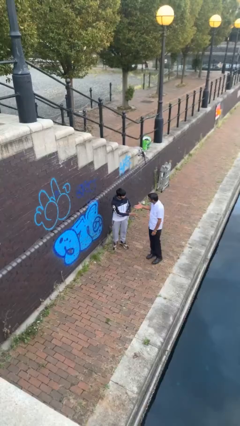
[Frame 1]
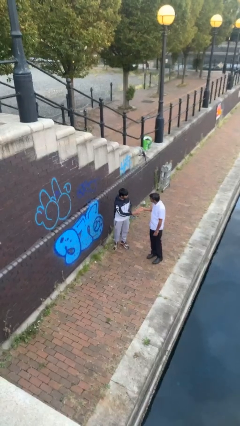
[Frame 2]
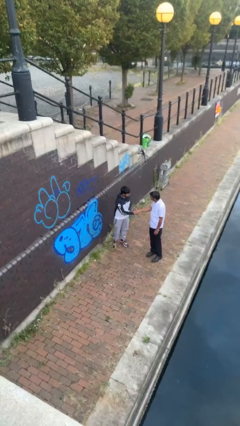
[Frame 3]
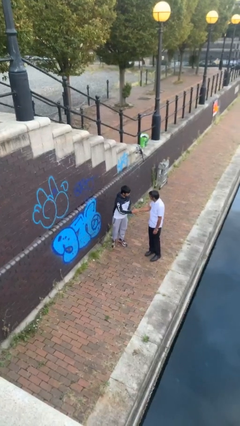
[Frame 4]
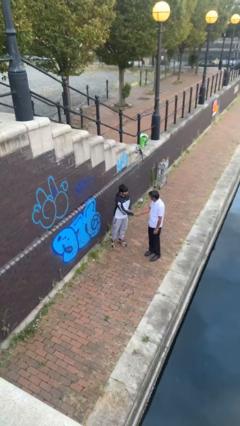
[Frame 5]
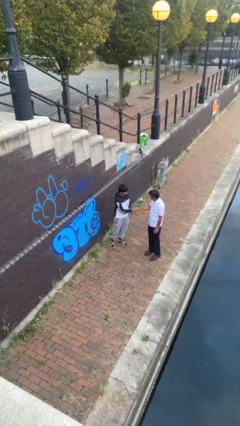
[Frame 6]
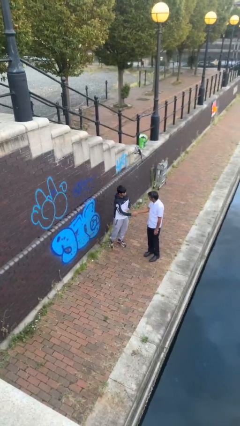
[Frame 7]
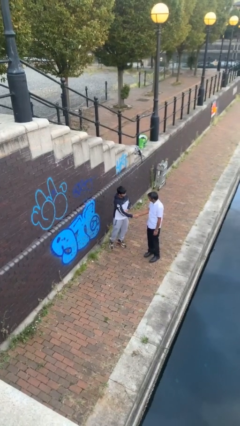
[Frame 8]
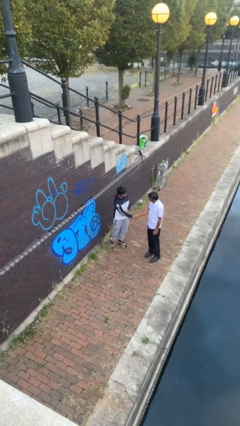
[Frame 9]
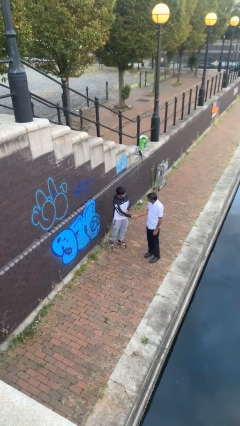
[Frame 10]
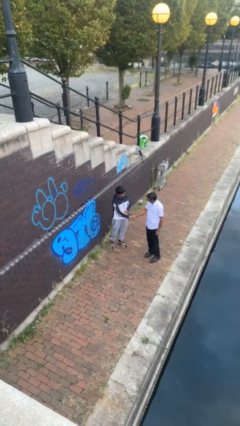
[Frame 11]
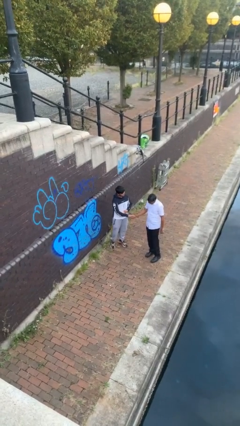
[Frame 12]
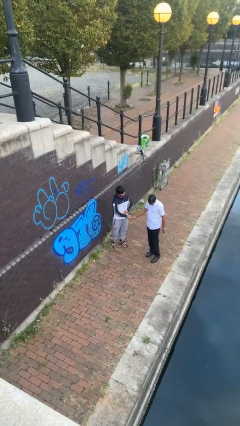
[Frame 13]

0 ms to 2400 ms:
person shakes hand

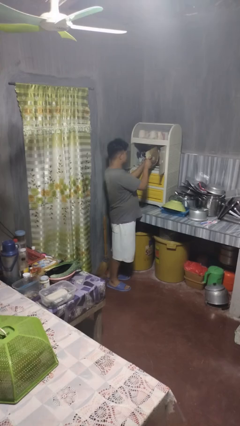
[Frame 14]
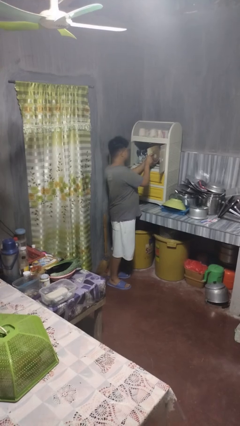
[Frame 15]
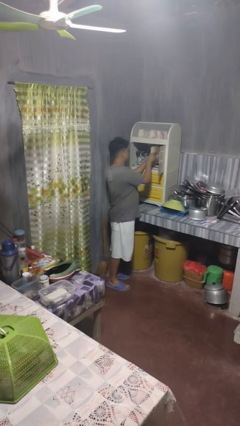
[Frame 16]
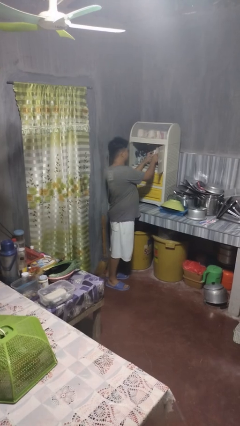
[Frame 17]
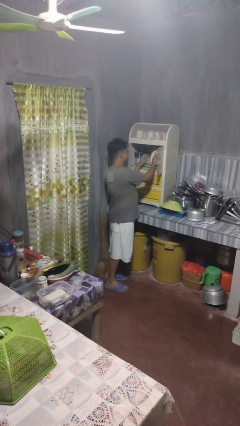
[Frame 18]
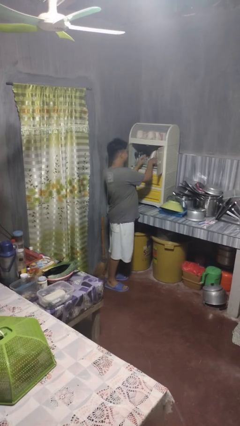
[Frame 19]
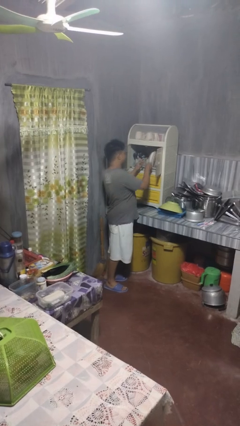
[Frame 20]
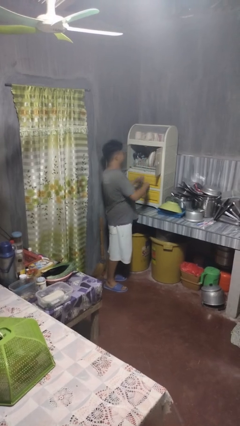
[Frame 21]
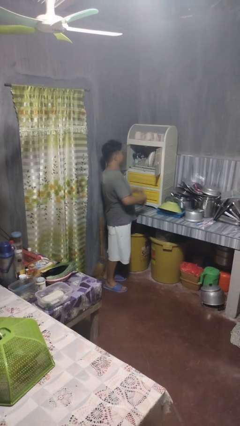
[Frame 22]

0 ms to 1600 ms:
person puts object in cabinet

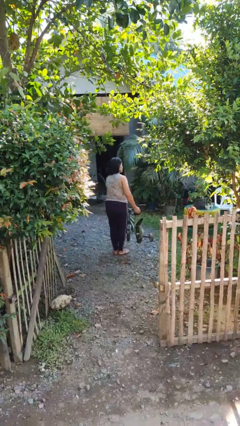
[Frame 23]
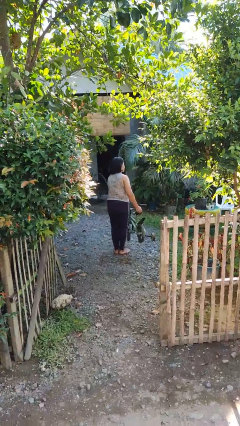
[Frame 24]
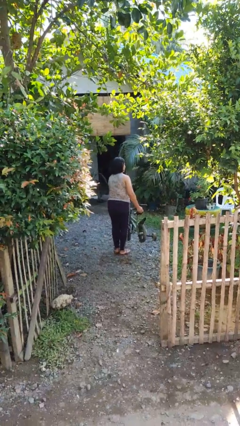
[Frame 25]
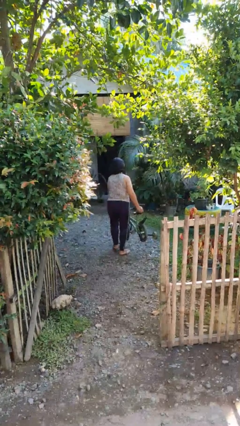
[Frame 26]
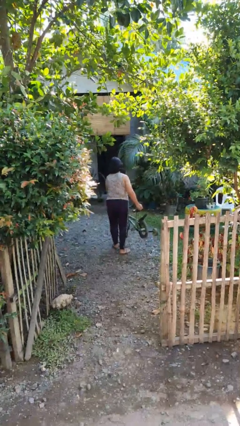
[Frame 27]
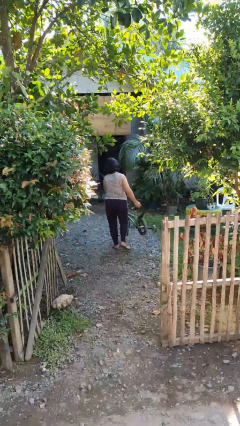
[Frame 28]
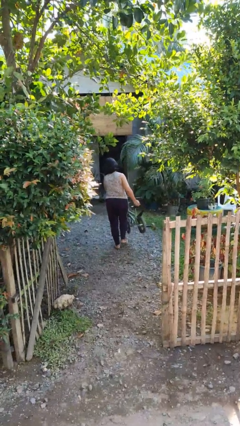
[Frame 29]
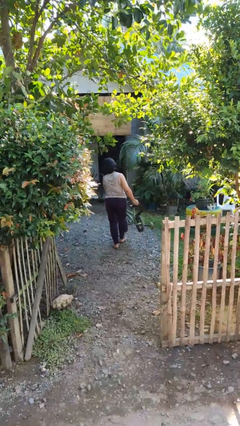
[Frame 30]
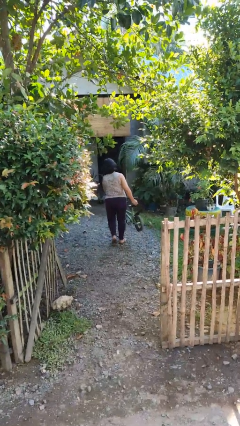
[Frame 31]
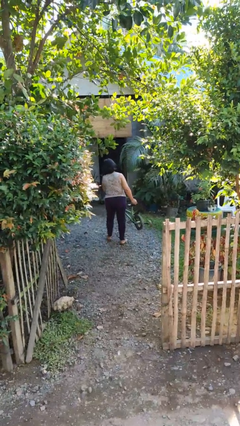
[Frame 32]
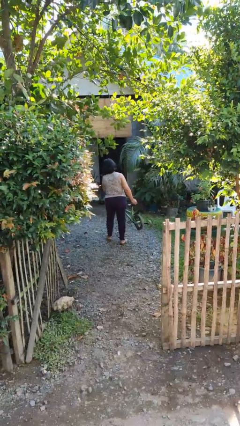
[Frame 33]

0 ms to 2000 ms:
person carries bicycle

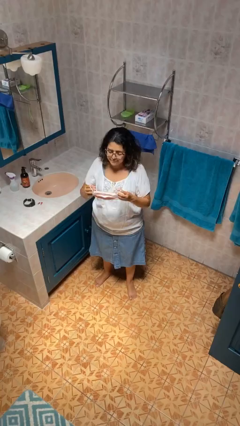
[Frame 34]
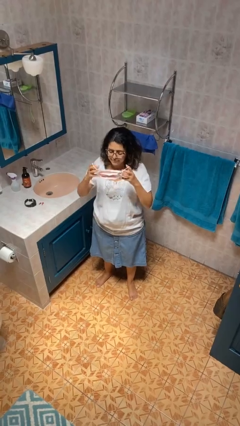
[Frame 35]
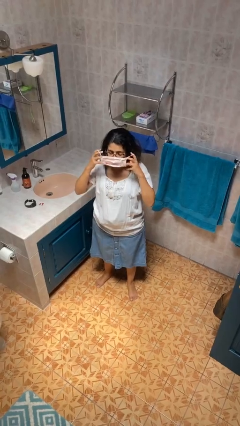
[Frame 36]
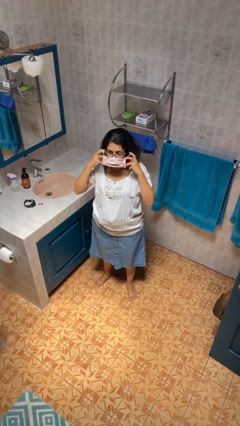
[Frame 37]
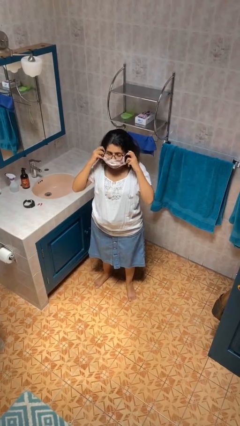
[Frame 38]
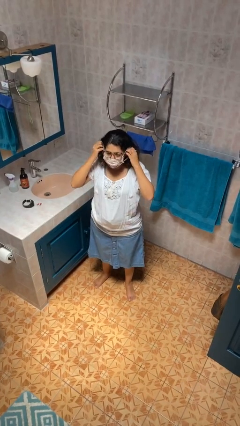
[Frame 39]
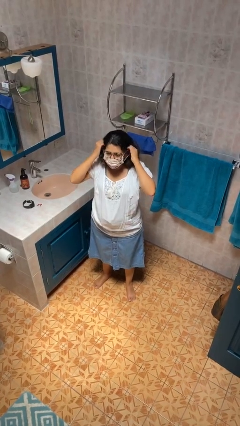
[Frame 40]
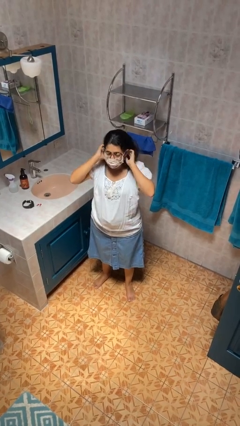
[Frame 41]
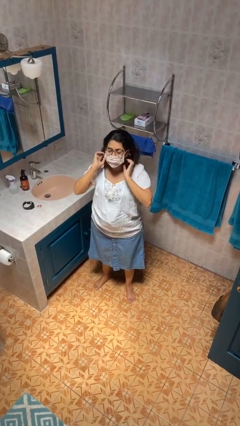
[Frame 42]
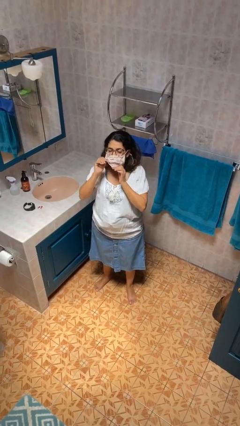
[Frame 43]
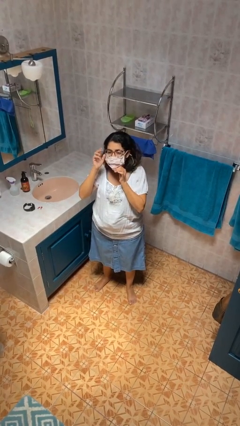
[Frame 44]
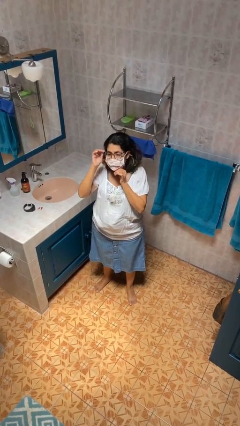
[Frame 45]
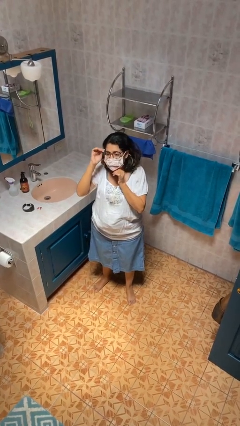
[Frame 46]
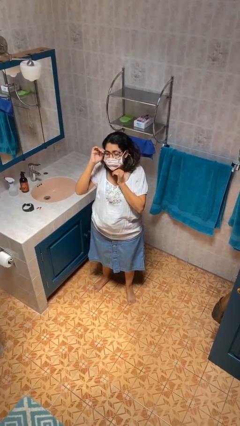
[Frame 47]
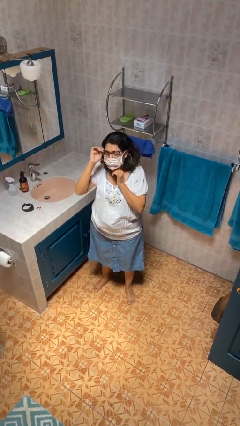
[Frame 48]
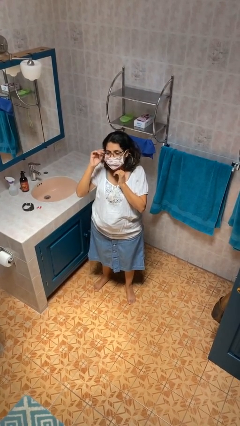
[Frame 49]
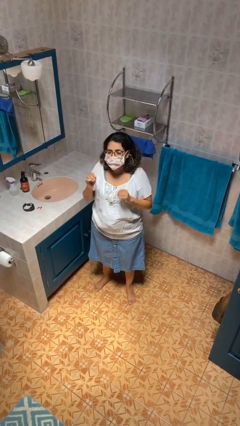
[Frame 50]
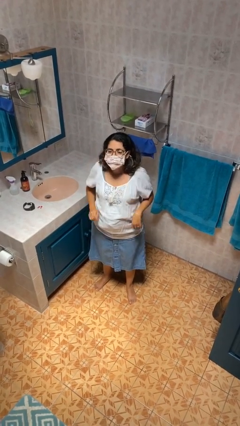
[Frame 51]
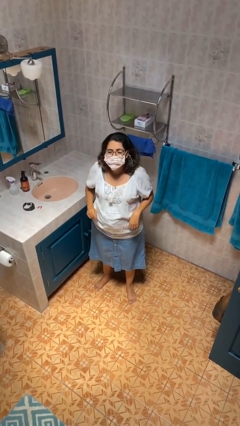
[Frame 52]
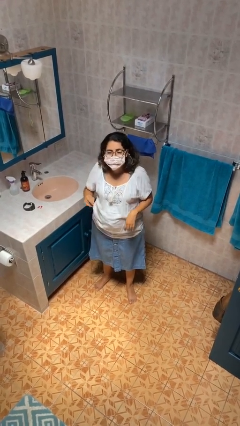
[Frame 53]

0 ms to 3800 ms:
person puts on facemask

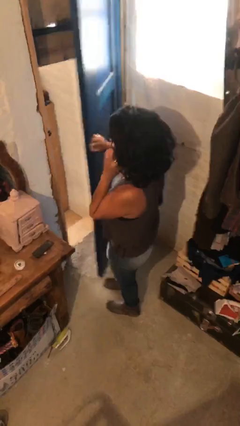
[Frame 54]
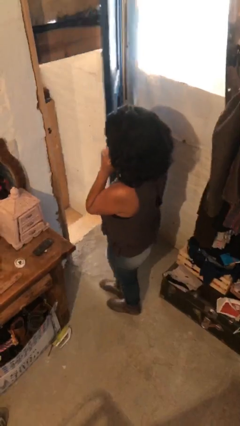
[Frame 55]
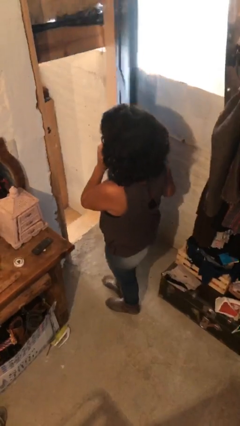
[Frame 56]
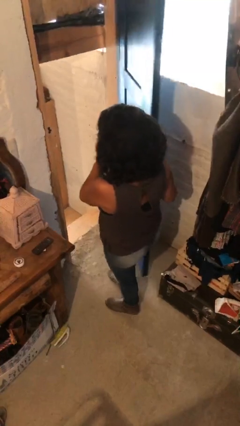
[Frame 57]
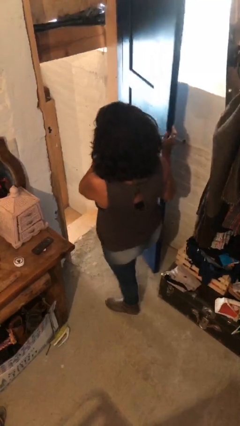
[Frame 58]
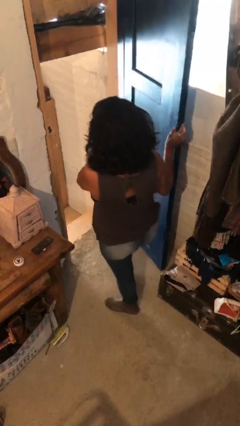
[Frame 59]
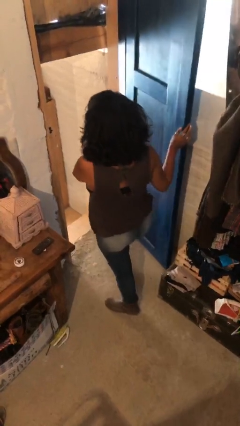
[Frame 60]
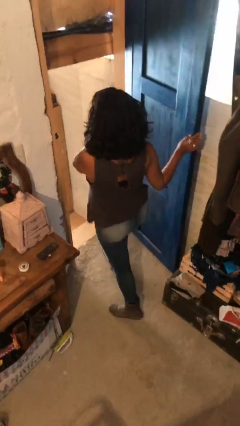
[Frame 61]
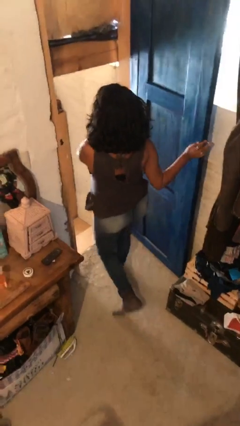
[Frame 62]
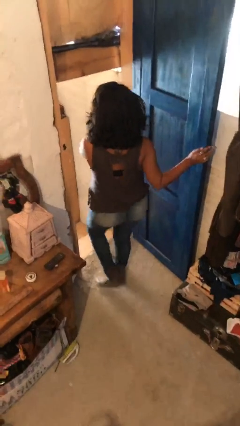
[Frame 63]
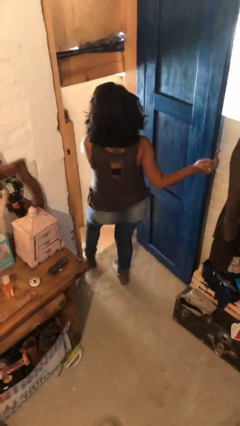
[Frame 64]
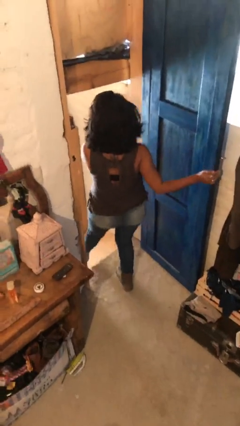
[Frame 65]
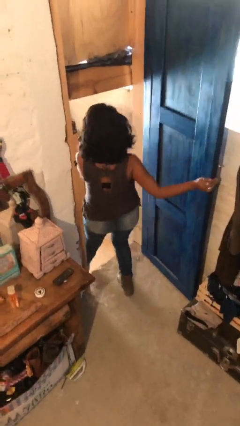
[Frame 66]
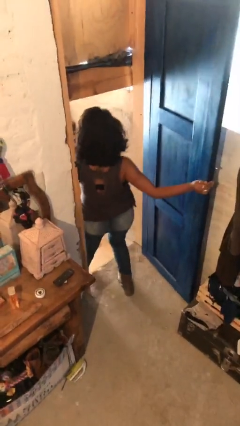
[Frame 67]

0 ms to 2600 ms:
person exits scene through structure

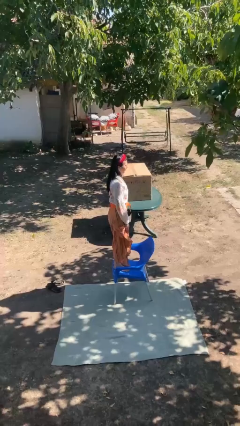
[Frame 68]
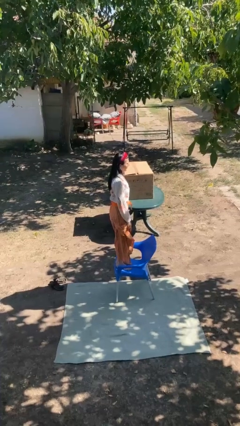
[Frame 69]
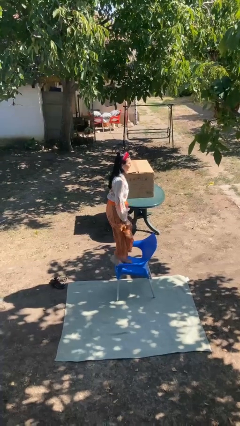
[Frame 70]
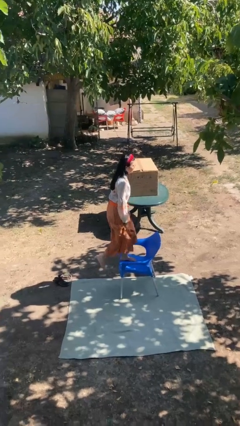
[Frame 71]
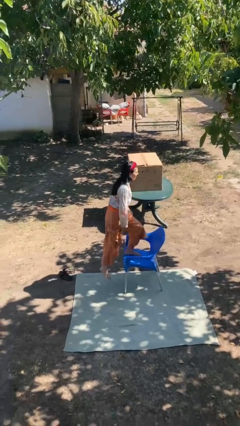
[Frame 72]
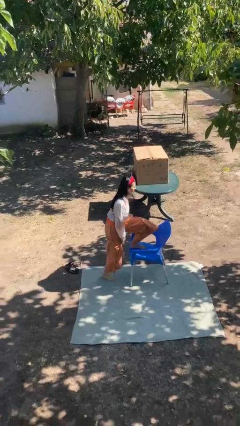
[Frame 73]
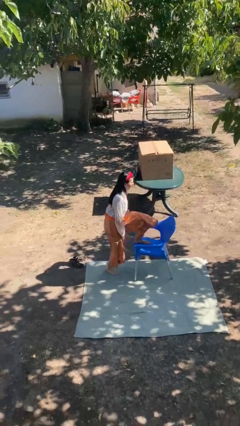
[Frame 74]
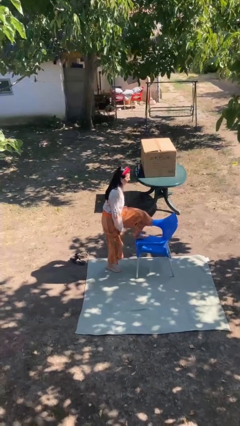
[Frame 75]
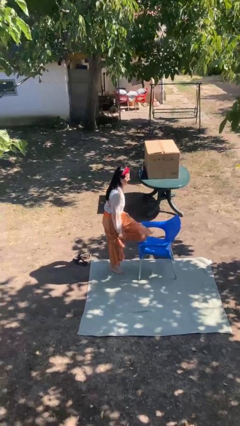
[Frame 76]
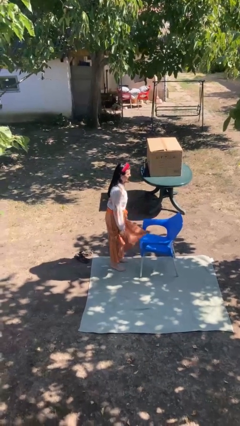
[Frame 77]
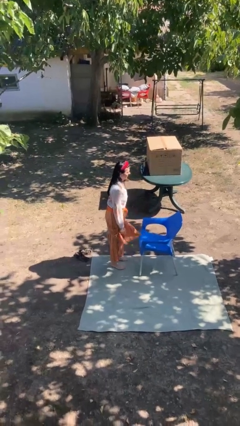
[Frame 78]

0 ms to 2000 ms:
person climbs off chair

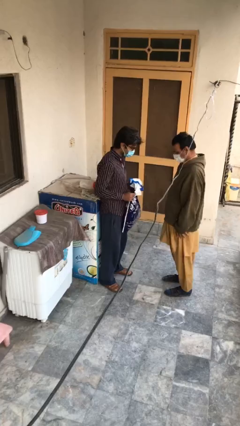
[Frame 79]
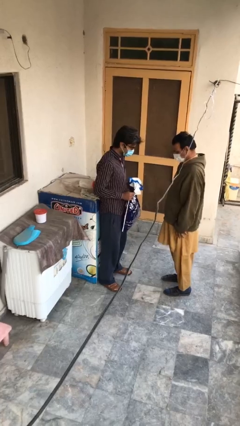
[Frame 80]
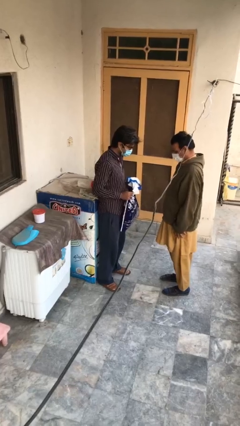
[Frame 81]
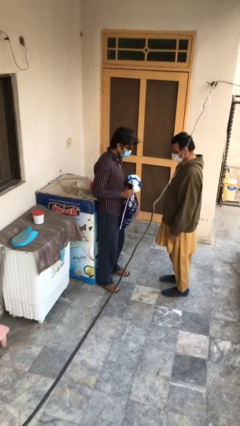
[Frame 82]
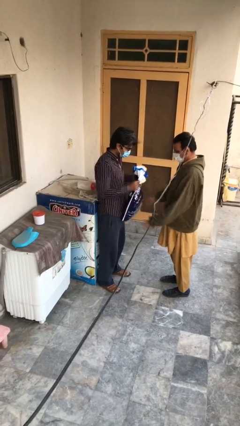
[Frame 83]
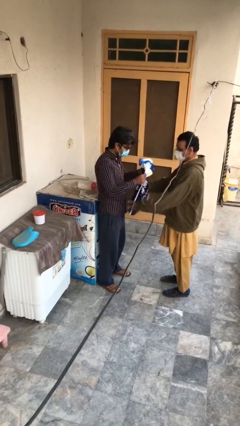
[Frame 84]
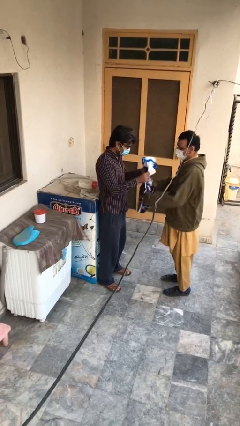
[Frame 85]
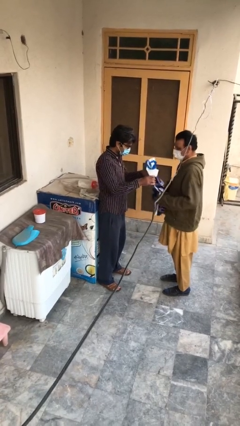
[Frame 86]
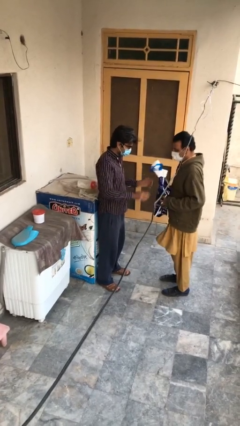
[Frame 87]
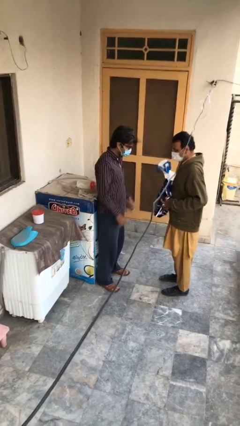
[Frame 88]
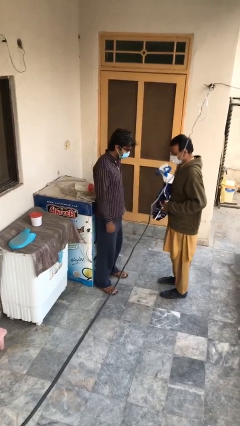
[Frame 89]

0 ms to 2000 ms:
person transfers object to person

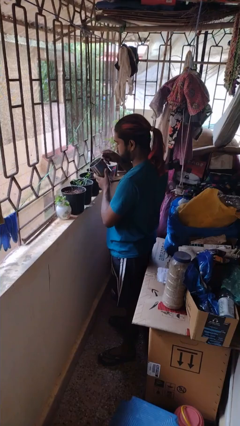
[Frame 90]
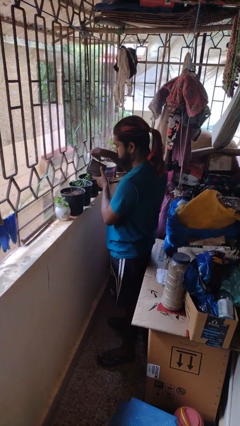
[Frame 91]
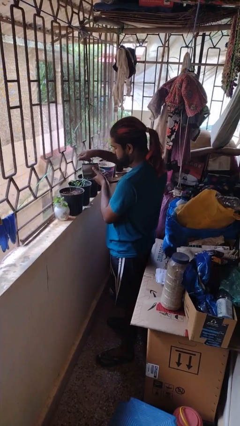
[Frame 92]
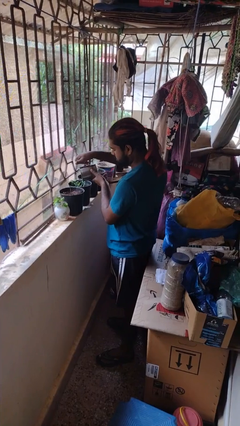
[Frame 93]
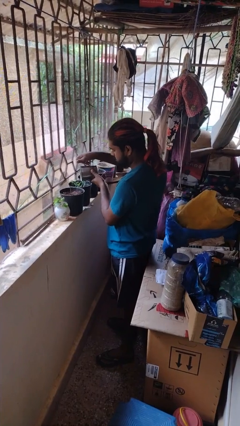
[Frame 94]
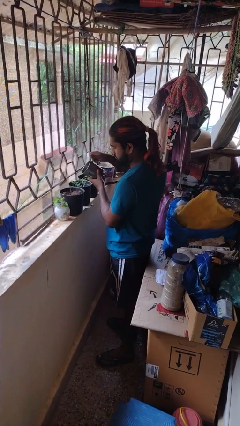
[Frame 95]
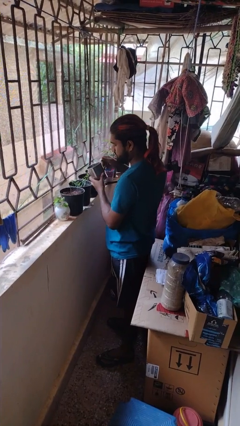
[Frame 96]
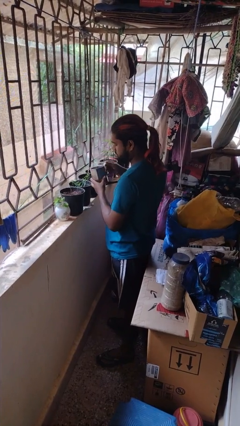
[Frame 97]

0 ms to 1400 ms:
person waters houseplant
